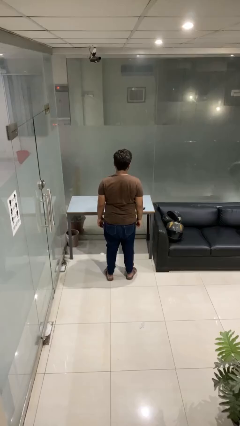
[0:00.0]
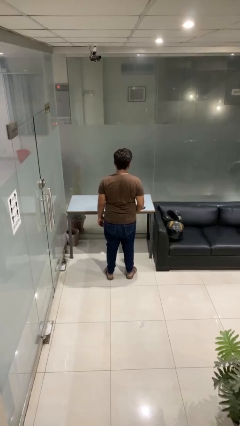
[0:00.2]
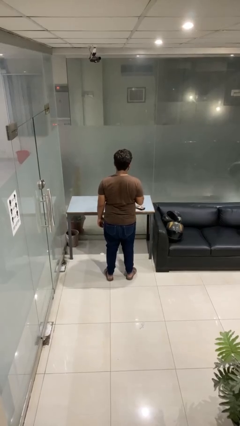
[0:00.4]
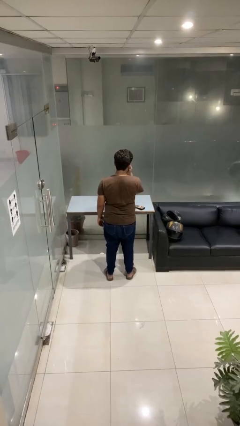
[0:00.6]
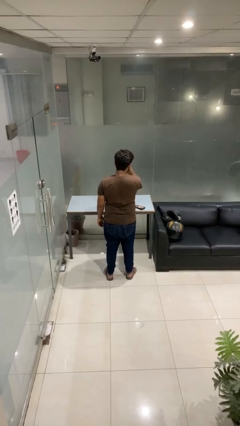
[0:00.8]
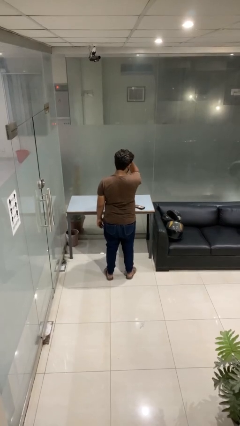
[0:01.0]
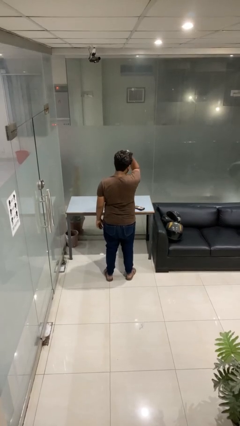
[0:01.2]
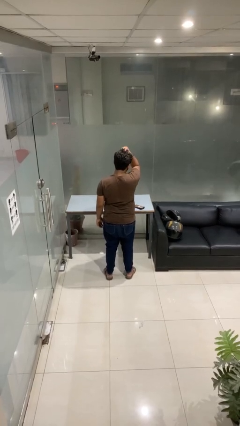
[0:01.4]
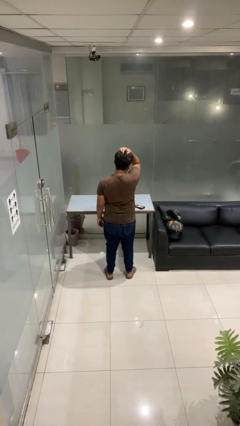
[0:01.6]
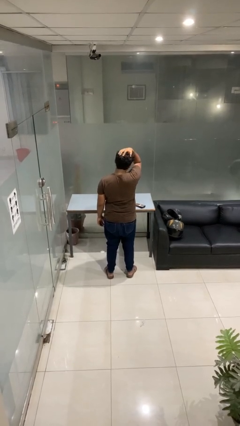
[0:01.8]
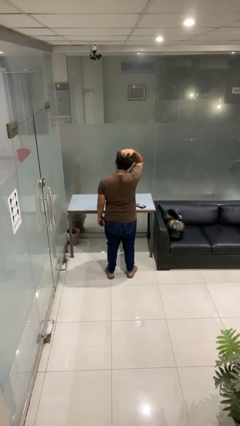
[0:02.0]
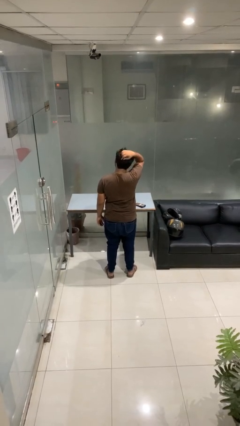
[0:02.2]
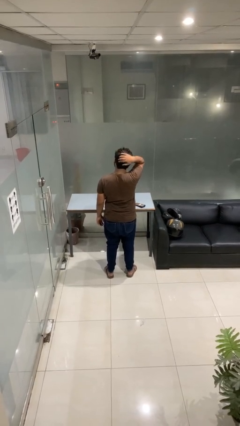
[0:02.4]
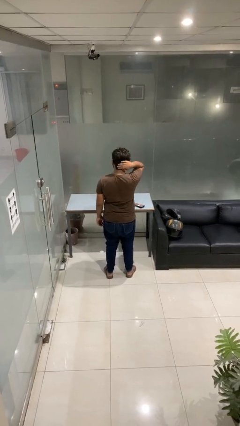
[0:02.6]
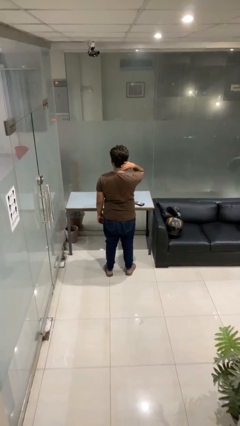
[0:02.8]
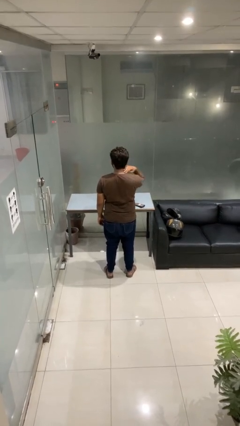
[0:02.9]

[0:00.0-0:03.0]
person strokes hair

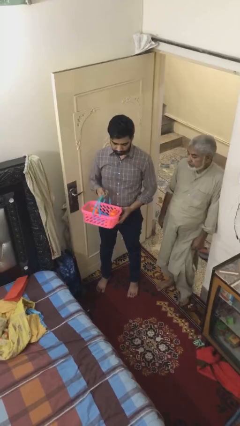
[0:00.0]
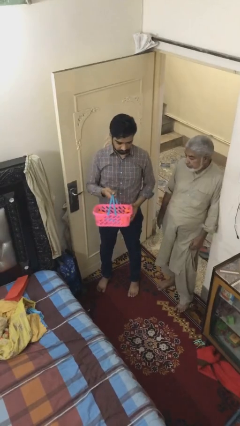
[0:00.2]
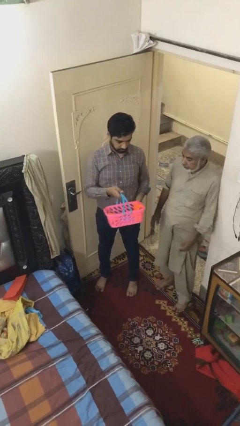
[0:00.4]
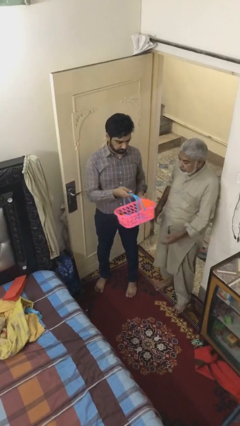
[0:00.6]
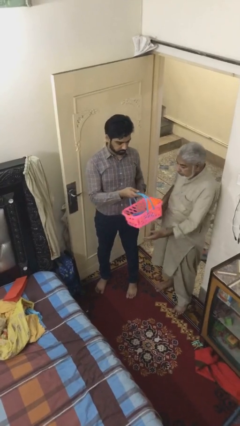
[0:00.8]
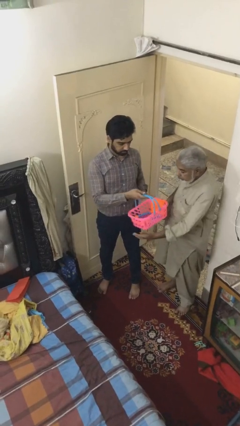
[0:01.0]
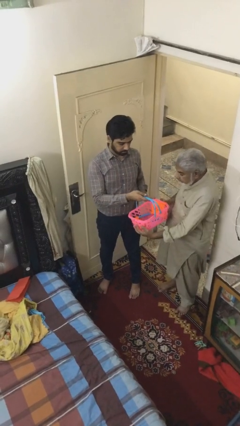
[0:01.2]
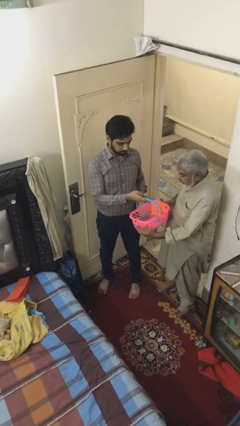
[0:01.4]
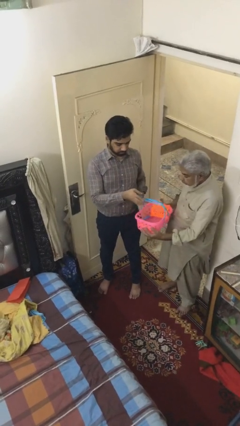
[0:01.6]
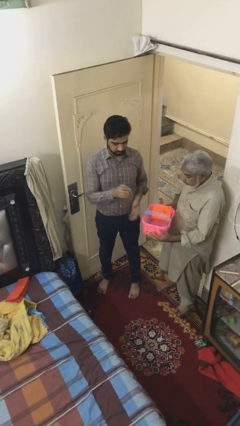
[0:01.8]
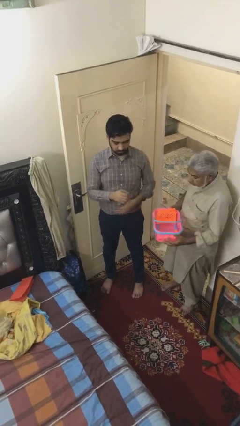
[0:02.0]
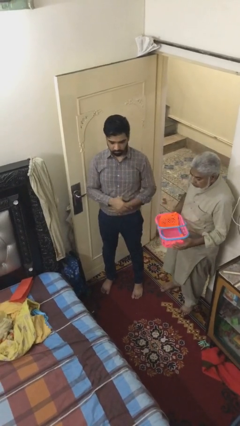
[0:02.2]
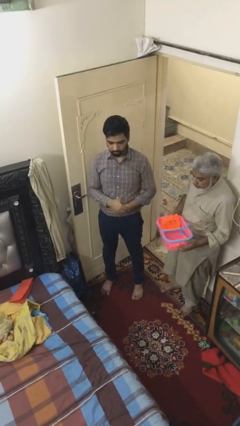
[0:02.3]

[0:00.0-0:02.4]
person transfers object to person

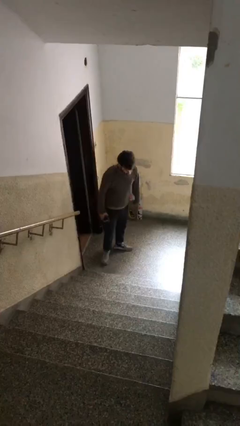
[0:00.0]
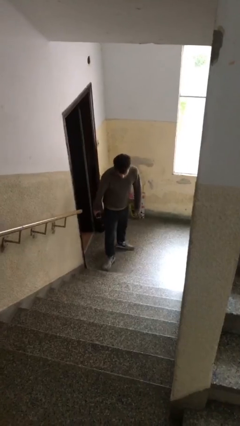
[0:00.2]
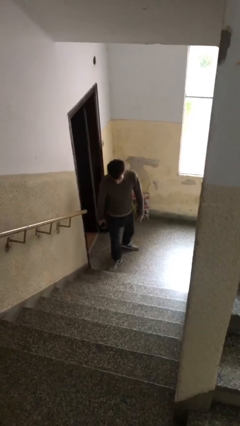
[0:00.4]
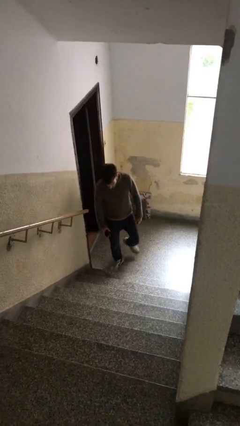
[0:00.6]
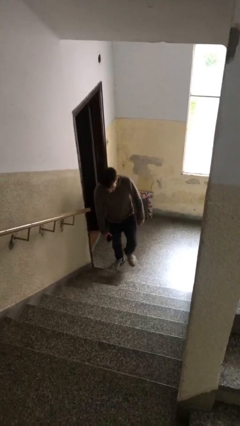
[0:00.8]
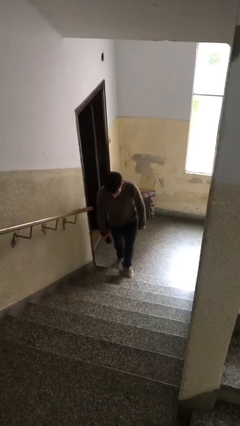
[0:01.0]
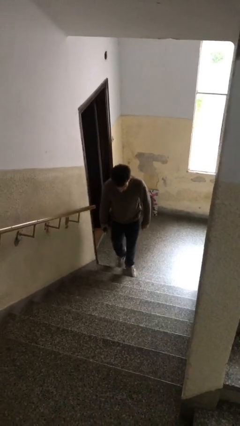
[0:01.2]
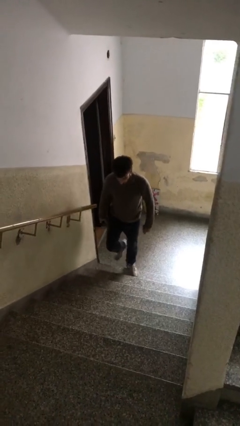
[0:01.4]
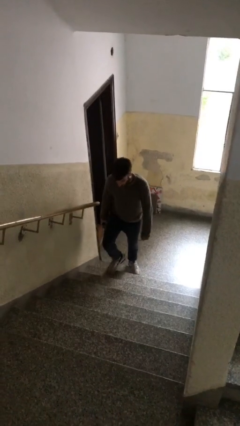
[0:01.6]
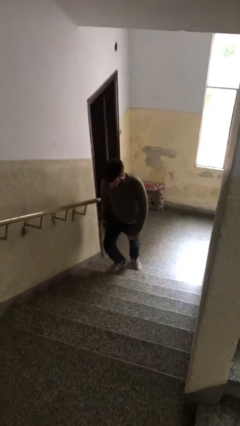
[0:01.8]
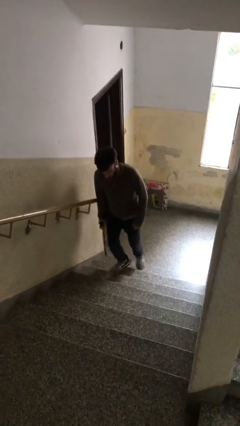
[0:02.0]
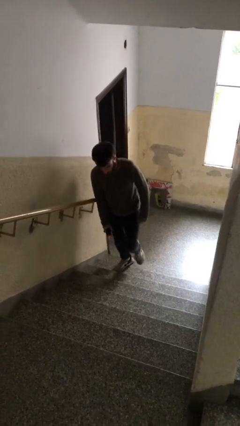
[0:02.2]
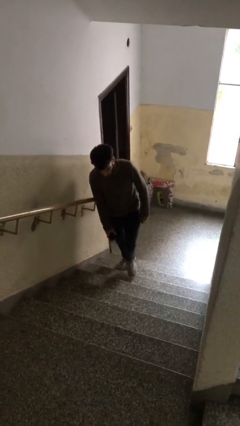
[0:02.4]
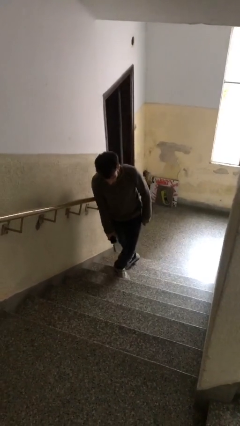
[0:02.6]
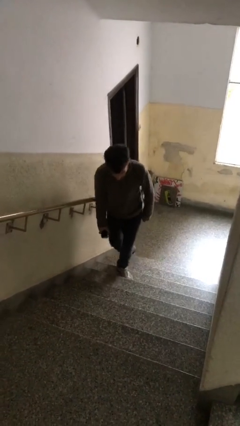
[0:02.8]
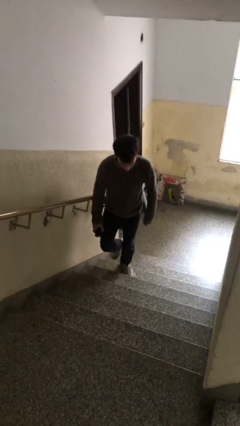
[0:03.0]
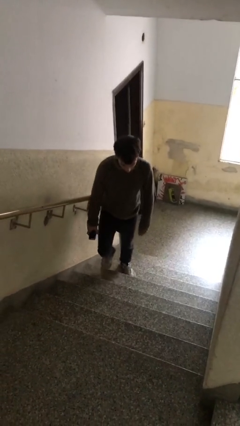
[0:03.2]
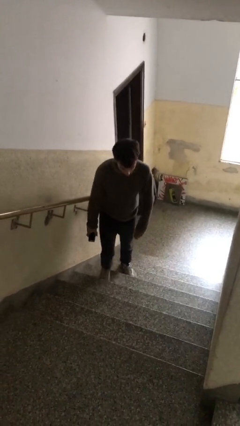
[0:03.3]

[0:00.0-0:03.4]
person climbs up stairs

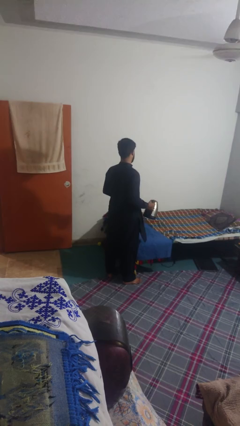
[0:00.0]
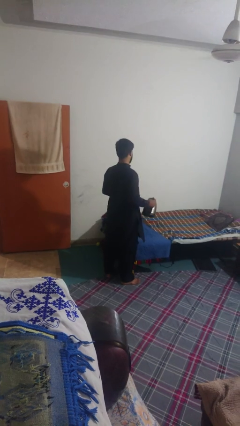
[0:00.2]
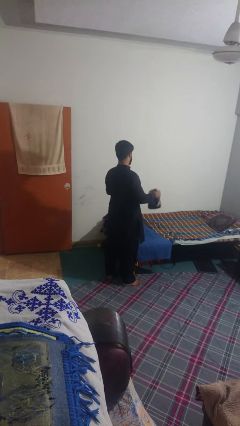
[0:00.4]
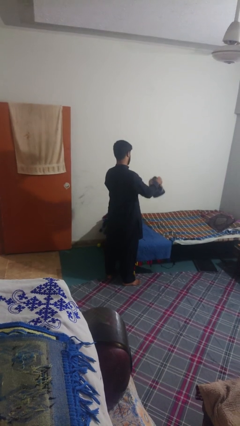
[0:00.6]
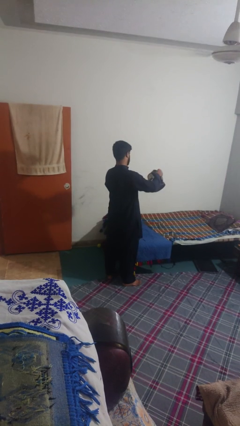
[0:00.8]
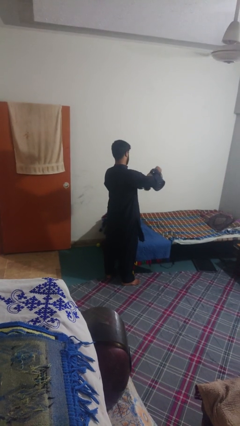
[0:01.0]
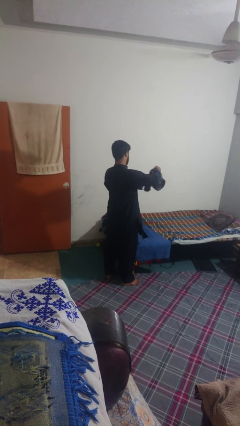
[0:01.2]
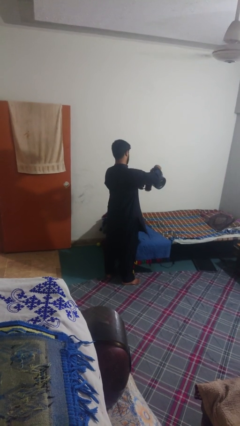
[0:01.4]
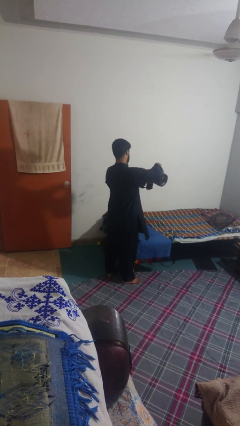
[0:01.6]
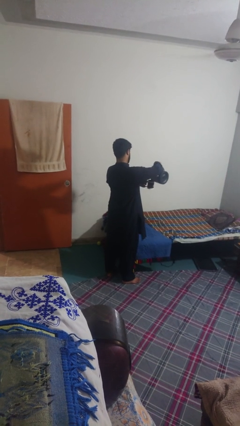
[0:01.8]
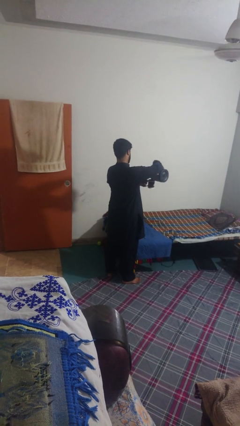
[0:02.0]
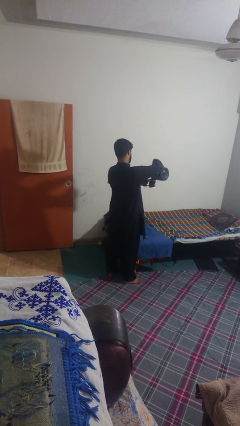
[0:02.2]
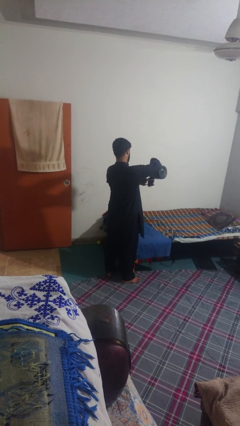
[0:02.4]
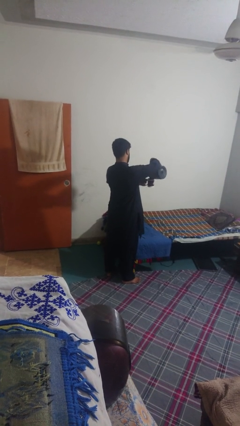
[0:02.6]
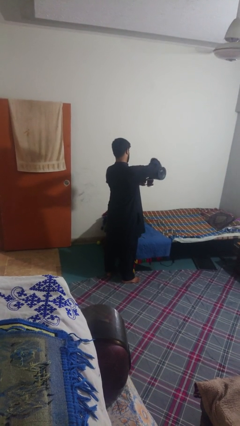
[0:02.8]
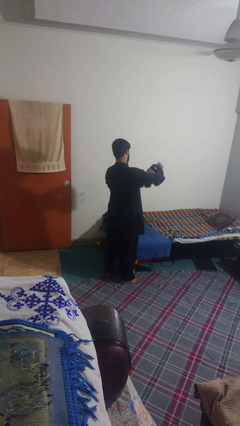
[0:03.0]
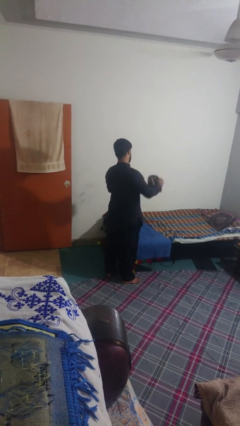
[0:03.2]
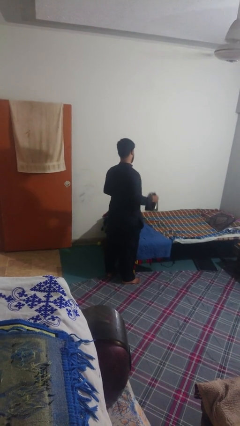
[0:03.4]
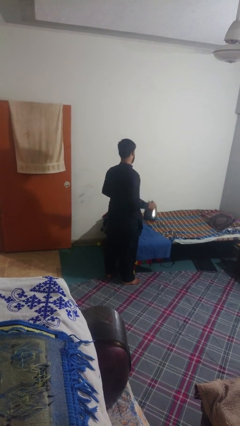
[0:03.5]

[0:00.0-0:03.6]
person pours coffee into mug

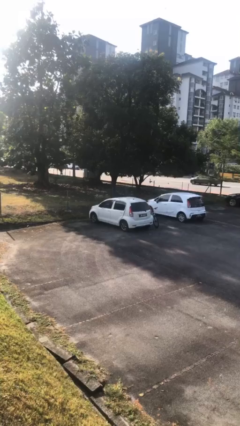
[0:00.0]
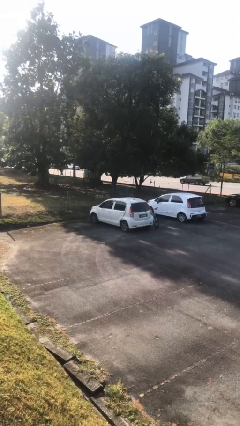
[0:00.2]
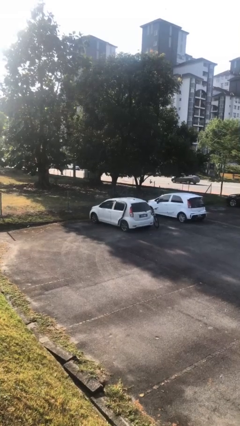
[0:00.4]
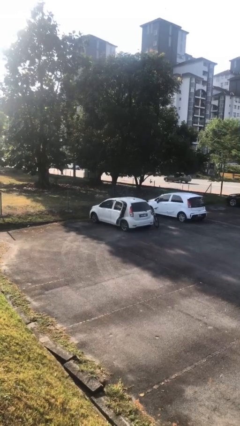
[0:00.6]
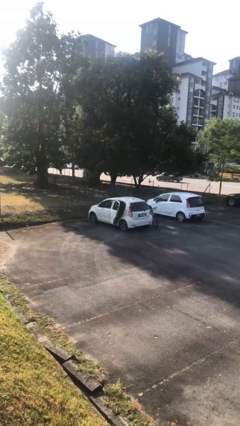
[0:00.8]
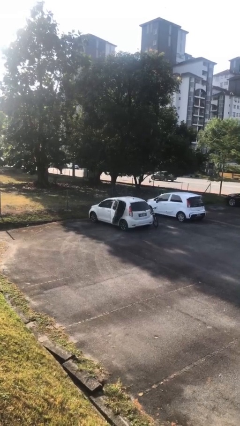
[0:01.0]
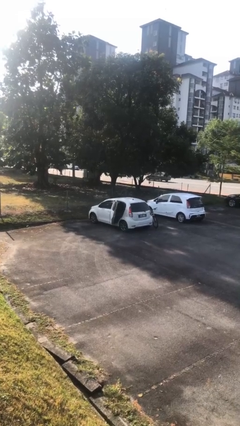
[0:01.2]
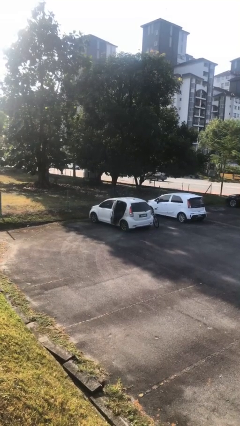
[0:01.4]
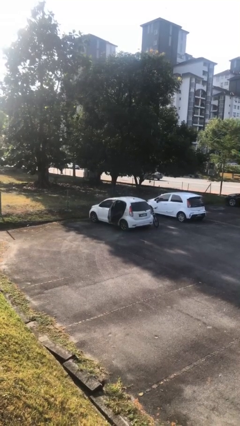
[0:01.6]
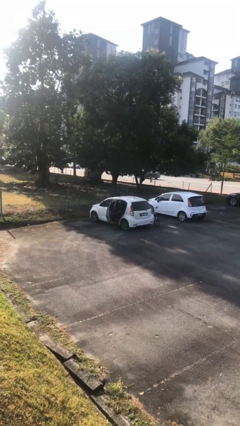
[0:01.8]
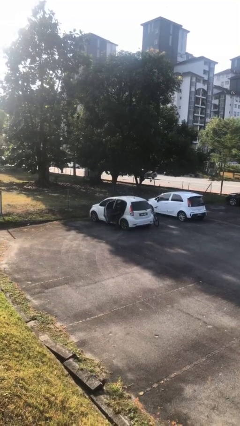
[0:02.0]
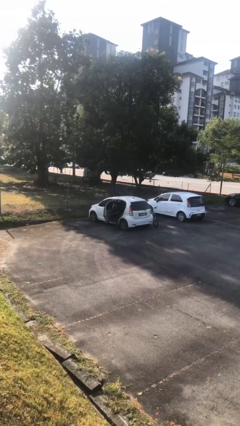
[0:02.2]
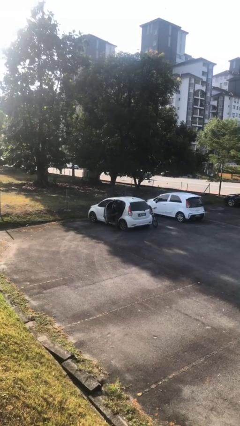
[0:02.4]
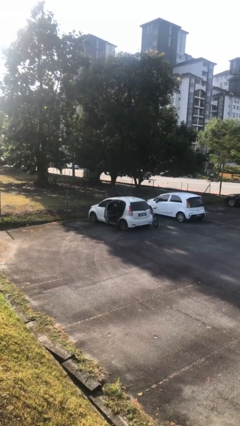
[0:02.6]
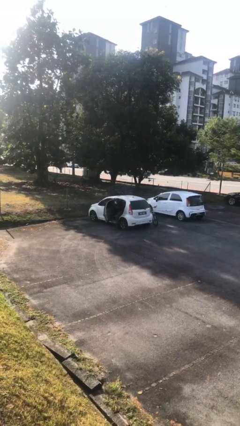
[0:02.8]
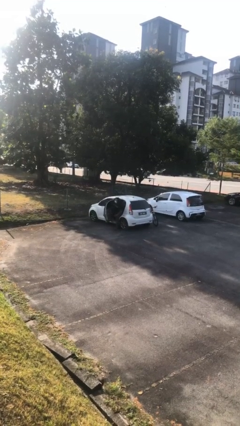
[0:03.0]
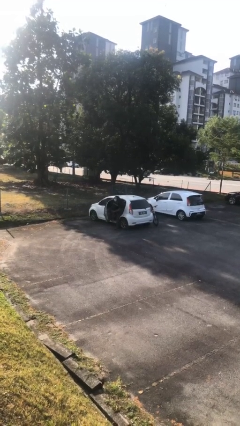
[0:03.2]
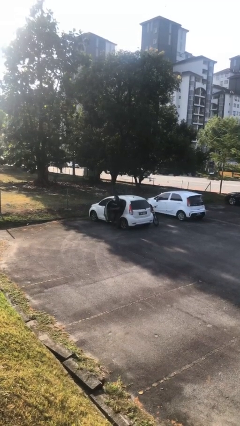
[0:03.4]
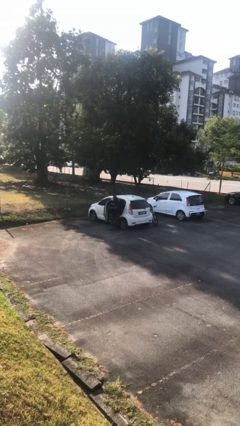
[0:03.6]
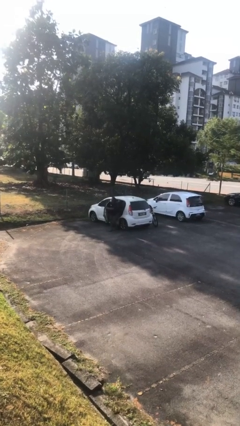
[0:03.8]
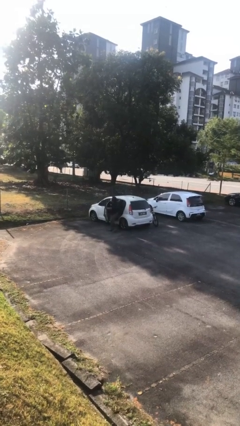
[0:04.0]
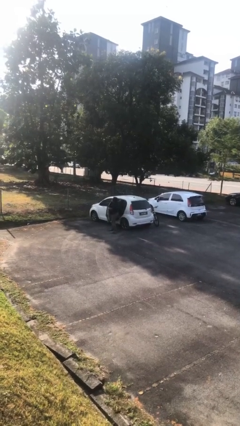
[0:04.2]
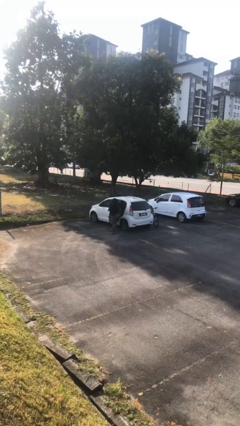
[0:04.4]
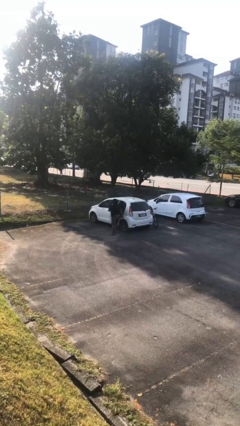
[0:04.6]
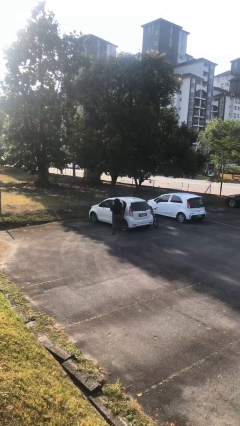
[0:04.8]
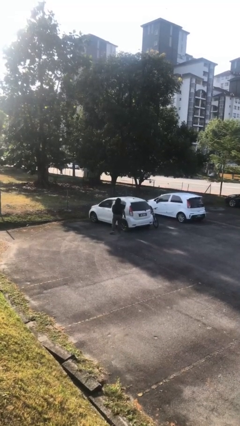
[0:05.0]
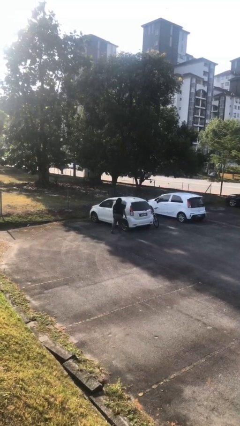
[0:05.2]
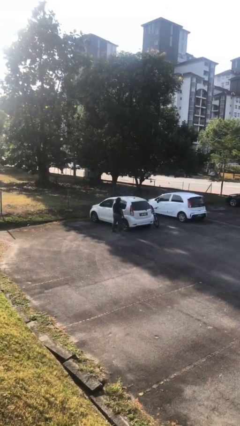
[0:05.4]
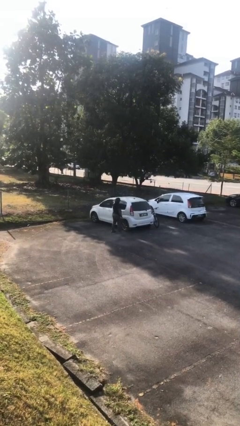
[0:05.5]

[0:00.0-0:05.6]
car drops off person
